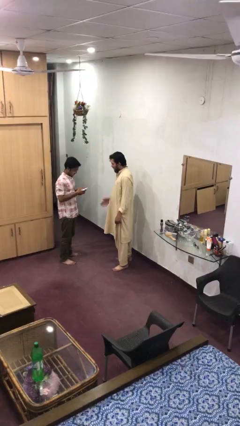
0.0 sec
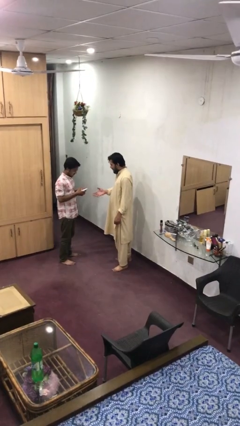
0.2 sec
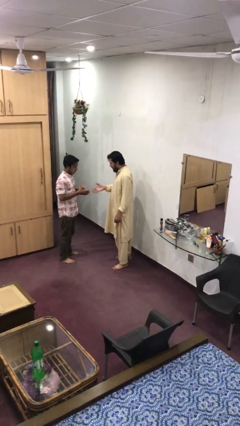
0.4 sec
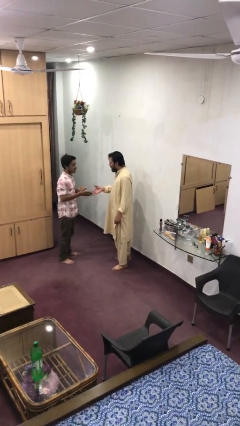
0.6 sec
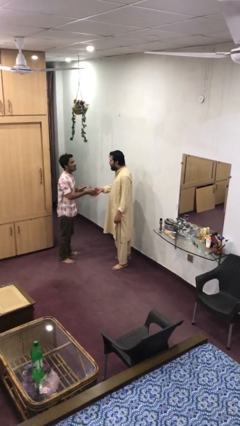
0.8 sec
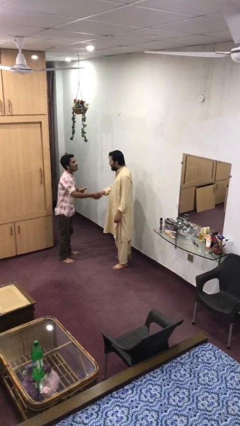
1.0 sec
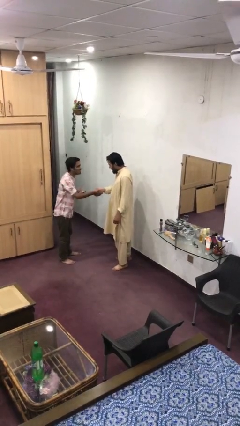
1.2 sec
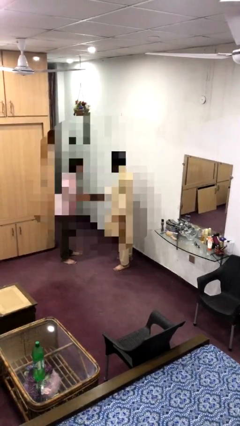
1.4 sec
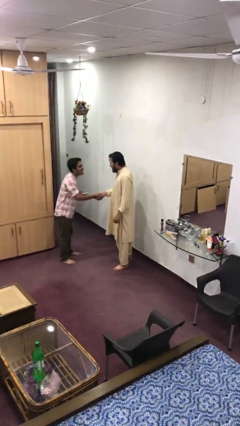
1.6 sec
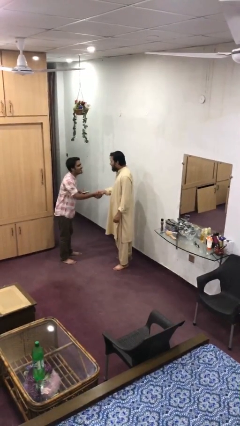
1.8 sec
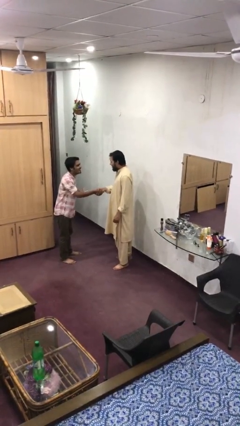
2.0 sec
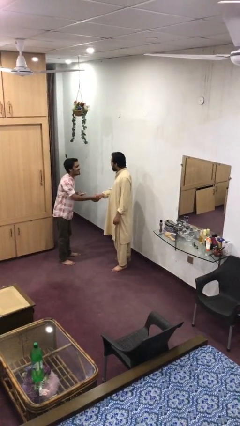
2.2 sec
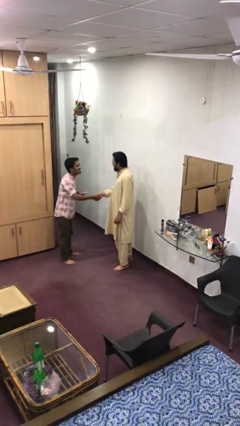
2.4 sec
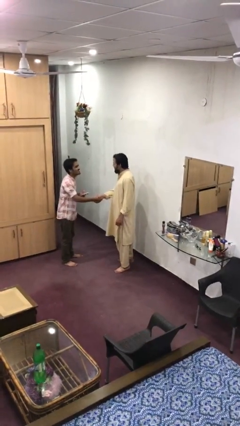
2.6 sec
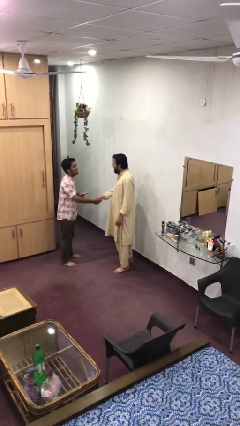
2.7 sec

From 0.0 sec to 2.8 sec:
person shakes hand

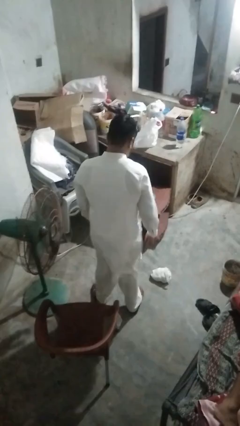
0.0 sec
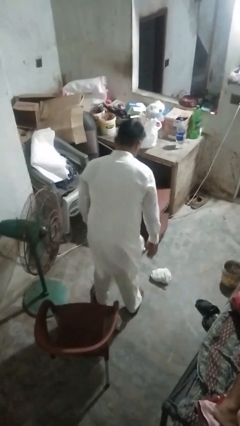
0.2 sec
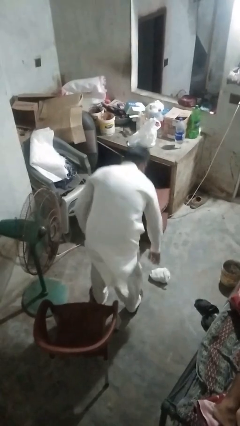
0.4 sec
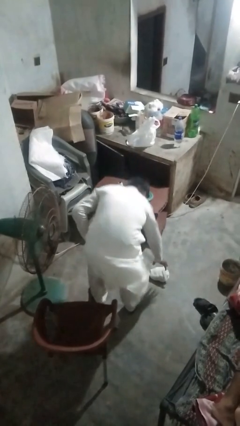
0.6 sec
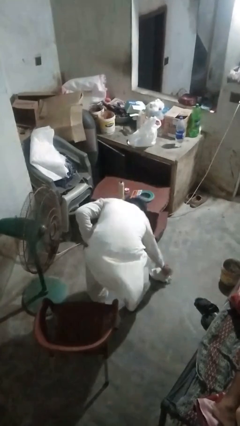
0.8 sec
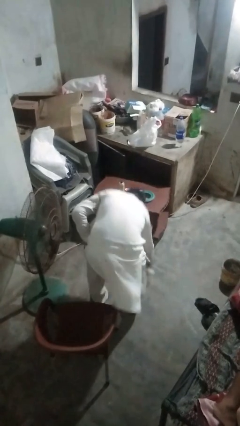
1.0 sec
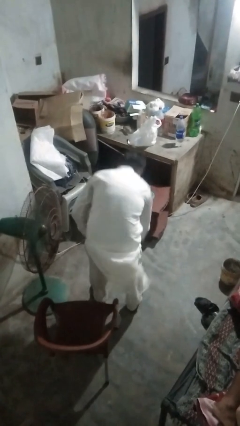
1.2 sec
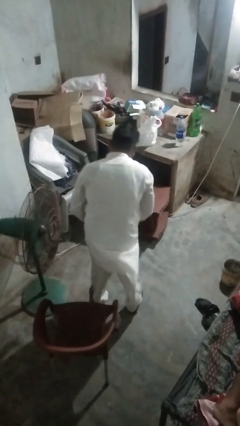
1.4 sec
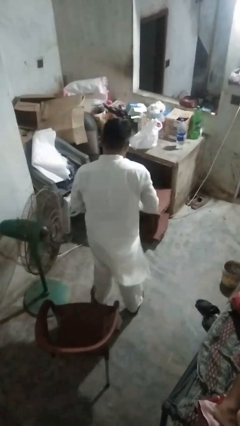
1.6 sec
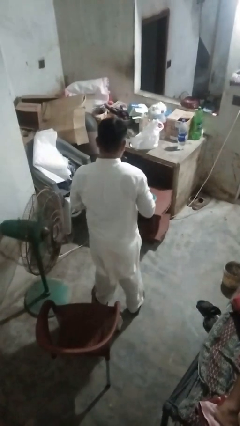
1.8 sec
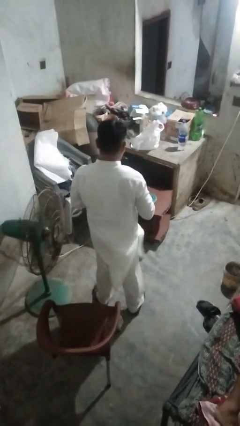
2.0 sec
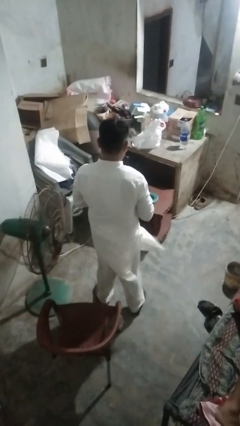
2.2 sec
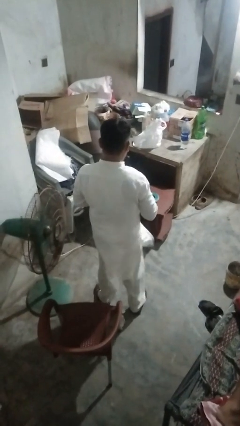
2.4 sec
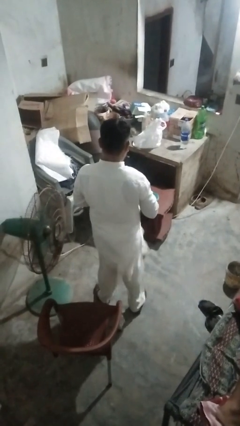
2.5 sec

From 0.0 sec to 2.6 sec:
person picks up object from floor

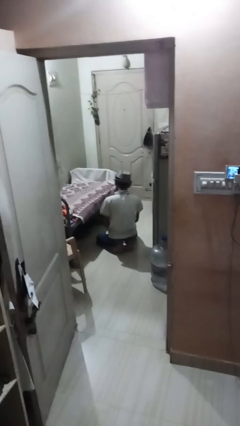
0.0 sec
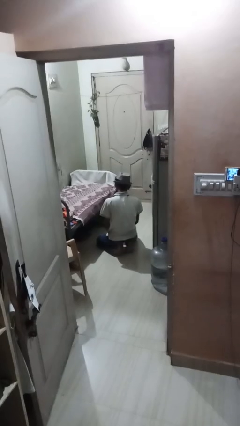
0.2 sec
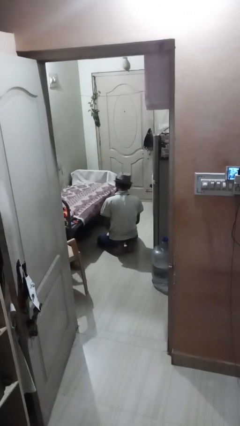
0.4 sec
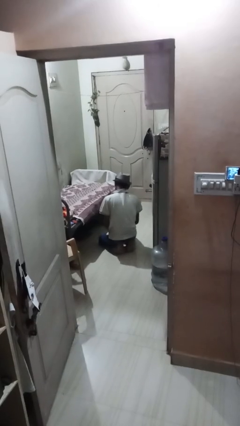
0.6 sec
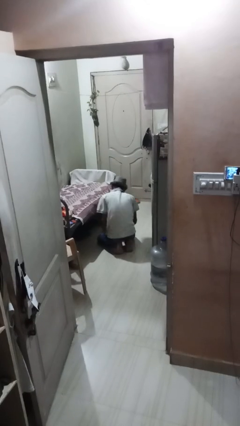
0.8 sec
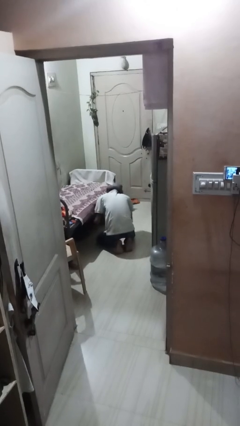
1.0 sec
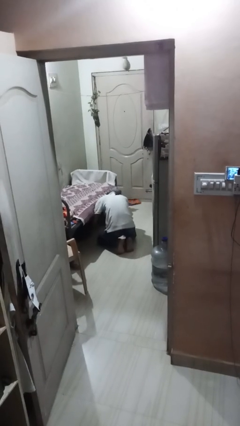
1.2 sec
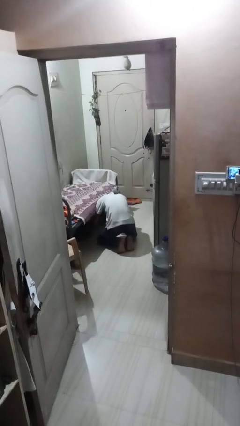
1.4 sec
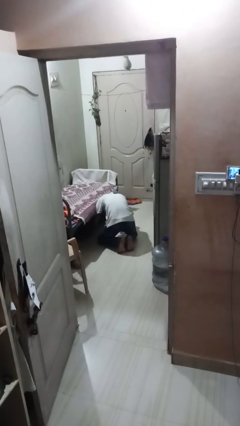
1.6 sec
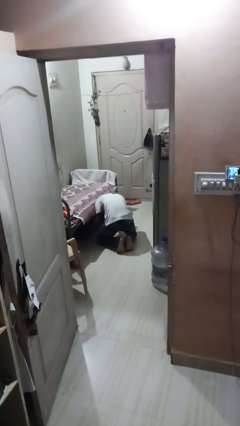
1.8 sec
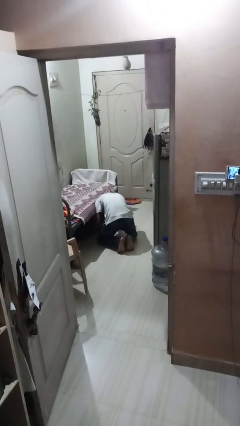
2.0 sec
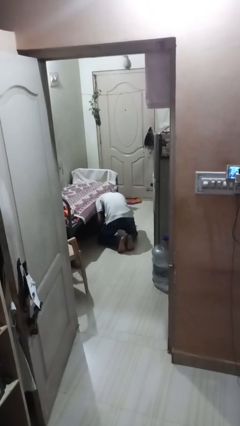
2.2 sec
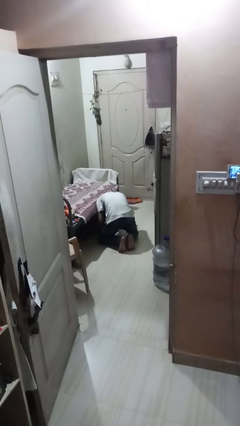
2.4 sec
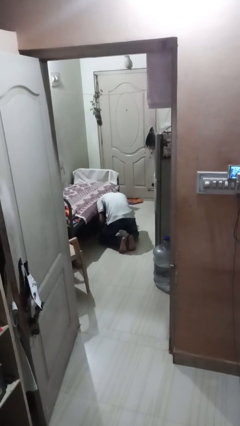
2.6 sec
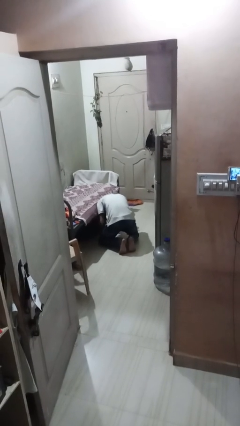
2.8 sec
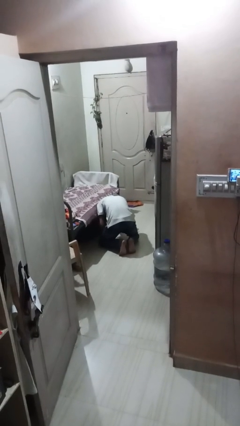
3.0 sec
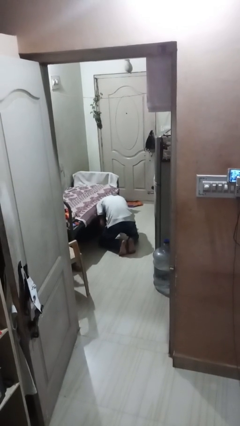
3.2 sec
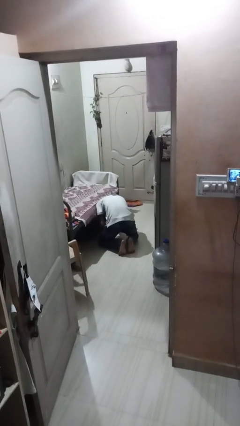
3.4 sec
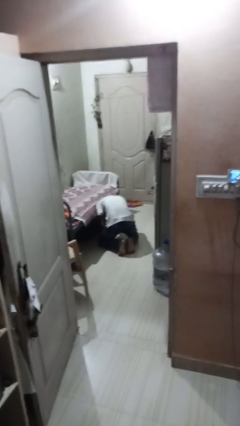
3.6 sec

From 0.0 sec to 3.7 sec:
person searches under bed

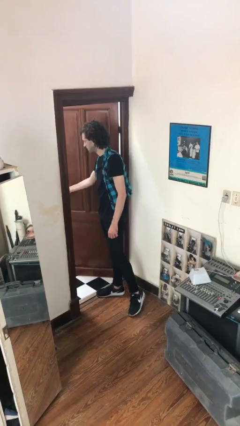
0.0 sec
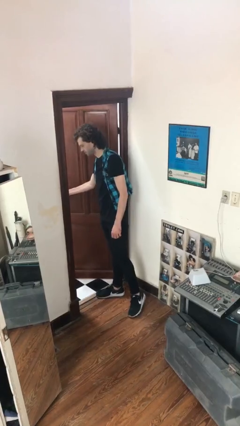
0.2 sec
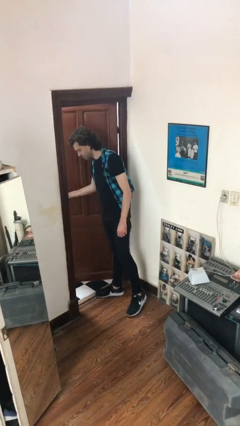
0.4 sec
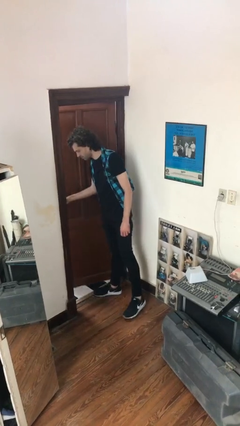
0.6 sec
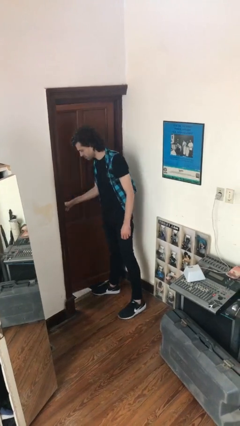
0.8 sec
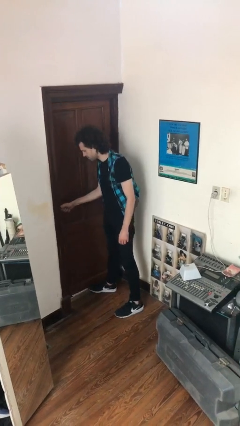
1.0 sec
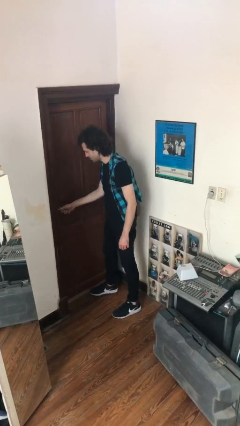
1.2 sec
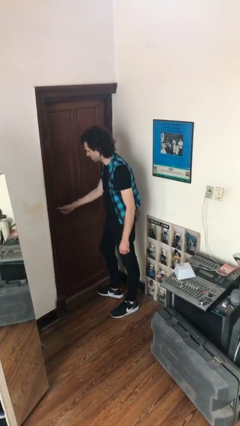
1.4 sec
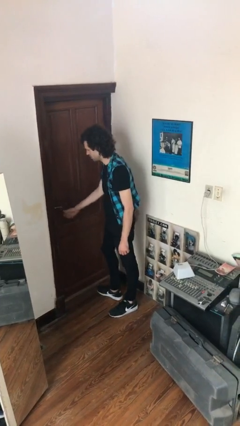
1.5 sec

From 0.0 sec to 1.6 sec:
person closes facility door

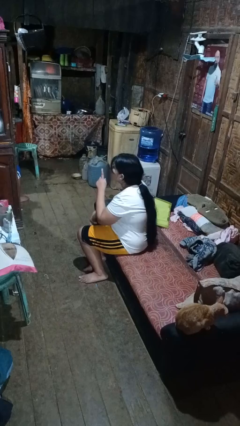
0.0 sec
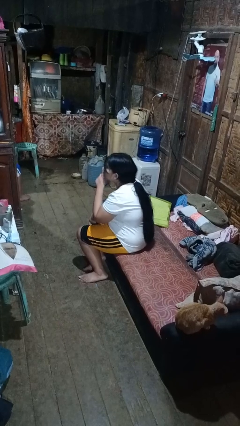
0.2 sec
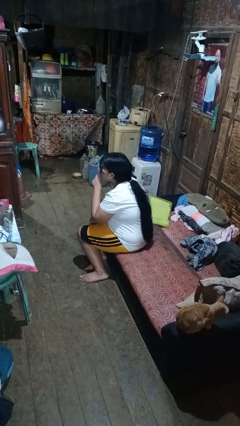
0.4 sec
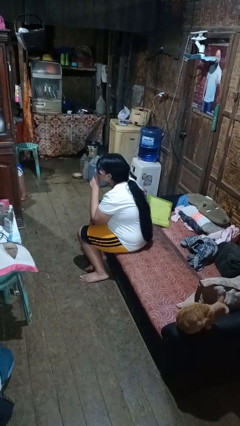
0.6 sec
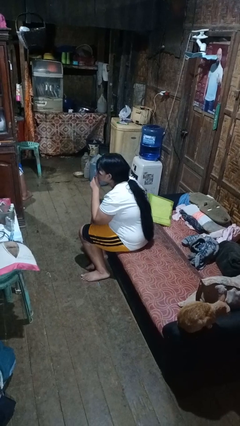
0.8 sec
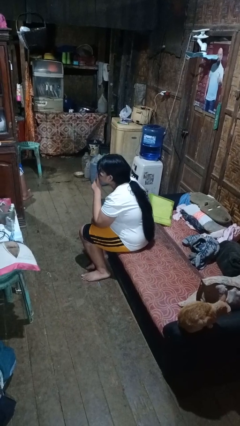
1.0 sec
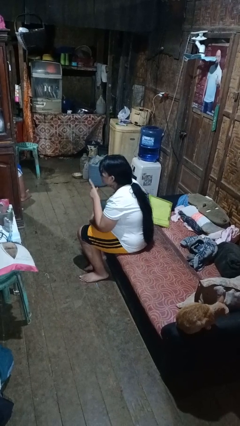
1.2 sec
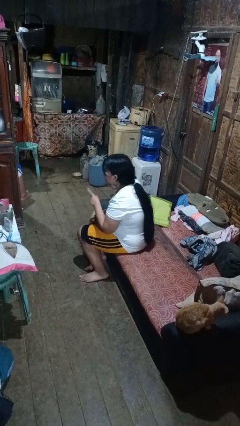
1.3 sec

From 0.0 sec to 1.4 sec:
person gestures be quiet

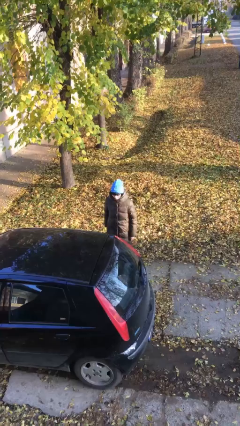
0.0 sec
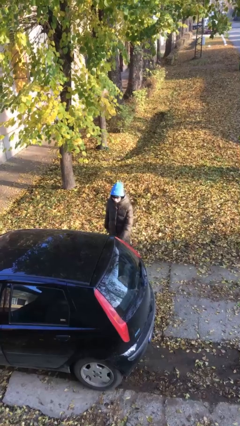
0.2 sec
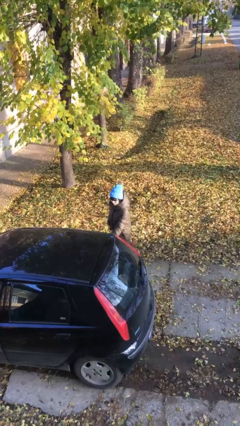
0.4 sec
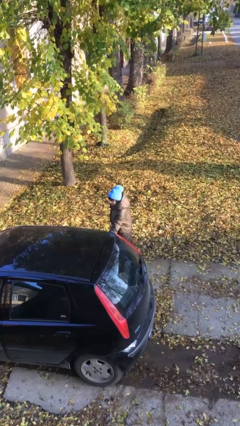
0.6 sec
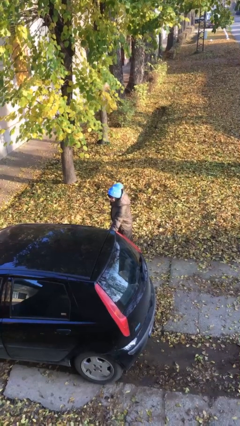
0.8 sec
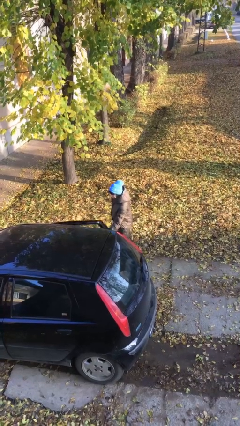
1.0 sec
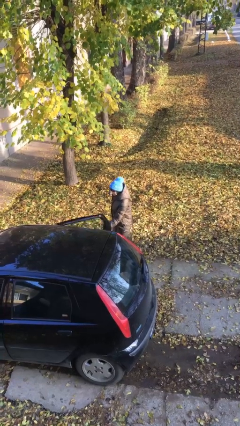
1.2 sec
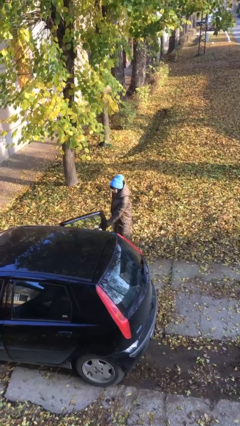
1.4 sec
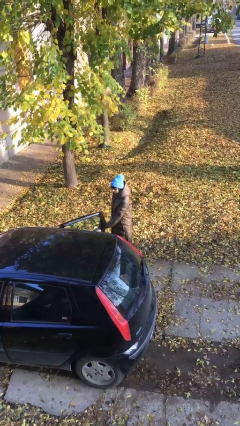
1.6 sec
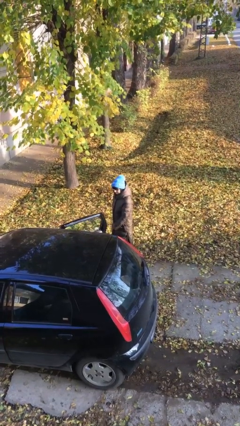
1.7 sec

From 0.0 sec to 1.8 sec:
person opens car door

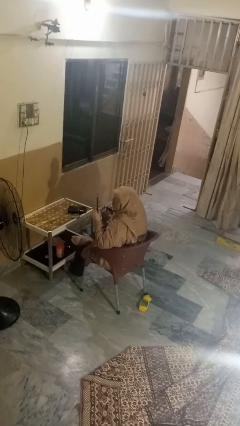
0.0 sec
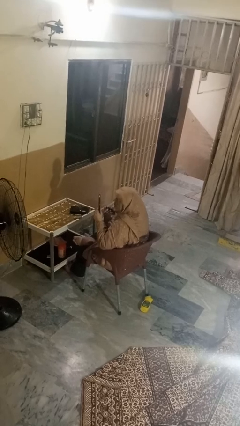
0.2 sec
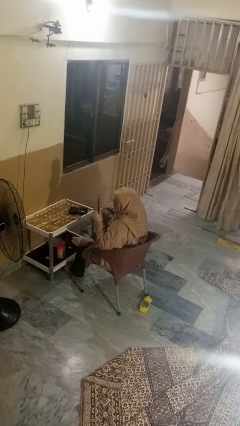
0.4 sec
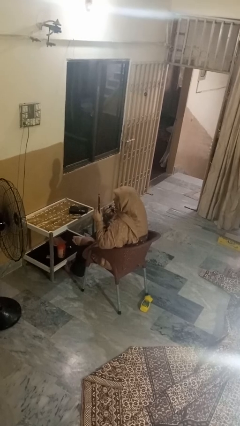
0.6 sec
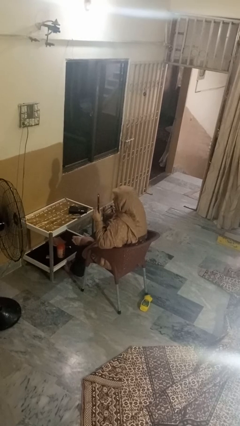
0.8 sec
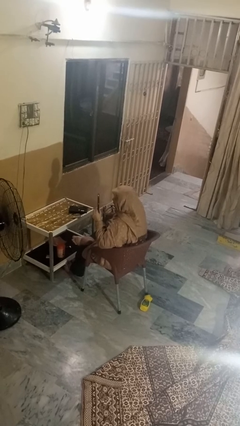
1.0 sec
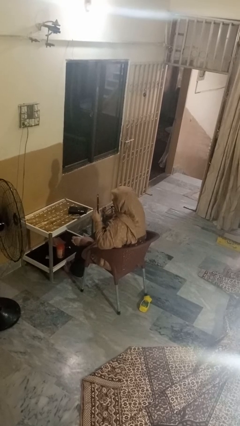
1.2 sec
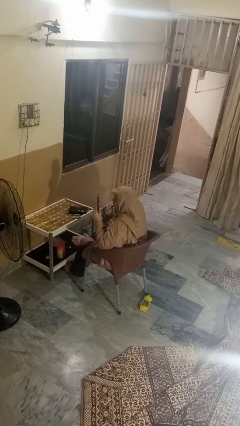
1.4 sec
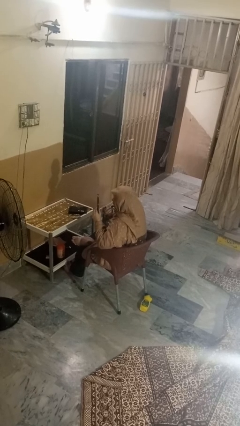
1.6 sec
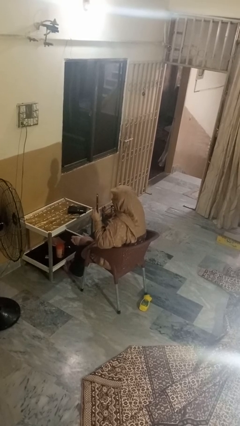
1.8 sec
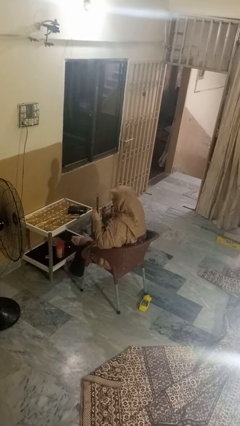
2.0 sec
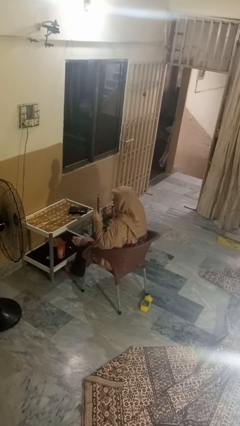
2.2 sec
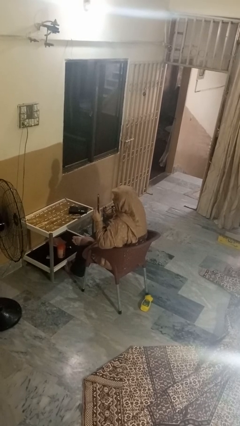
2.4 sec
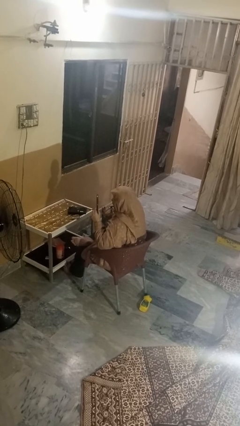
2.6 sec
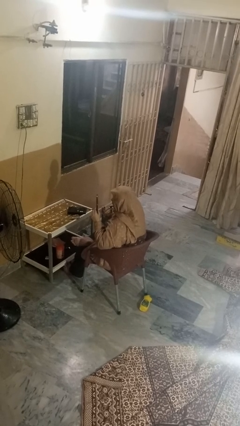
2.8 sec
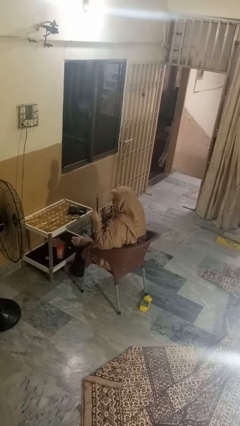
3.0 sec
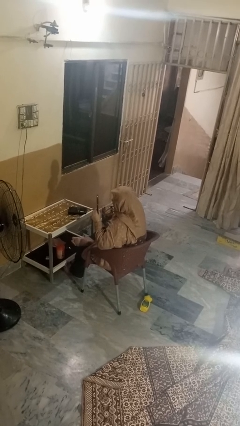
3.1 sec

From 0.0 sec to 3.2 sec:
person applies lip makeup

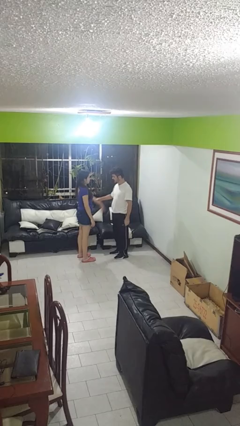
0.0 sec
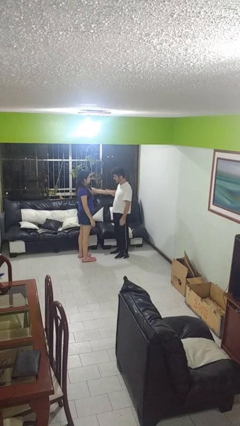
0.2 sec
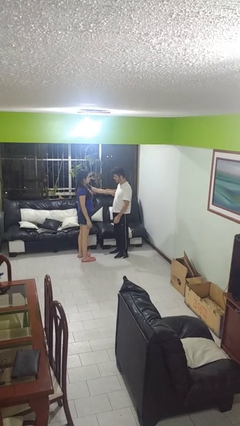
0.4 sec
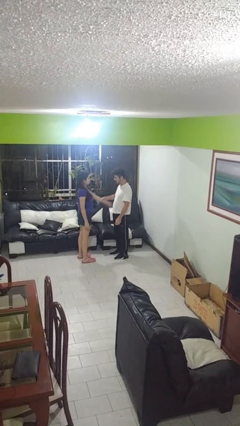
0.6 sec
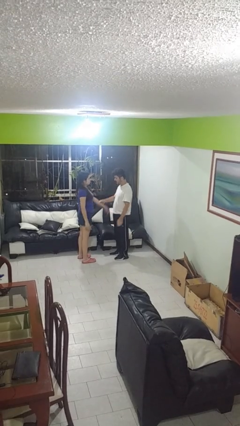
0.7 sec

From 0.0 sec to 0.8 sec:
person grabs person by forearm
